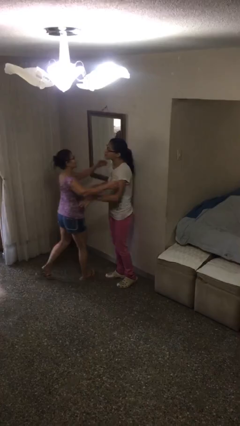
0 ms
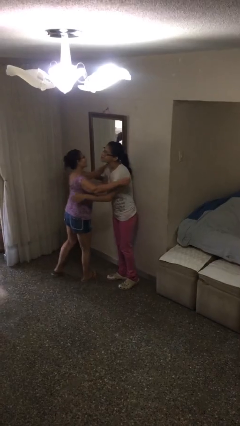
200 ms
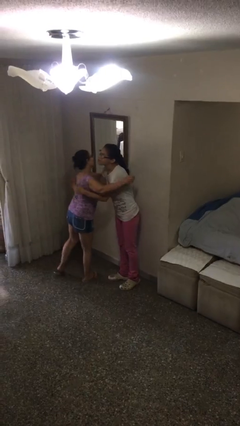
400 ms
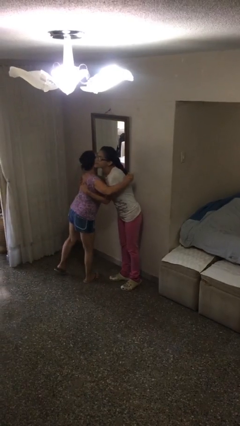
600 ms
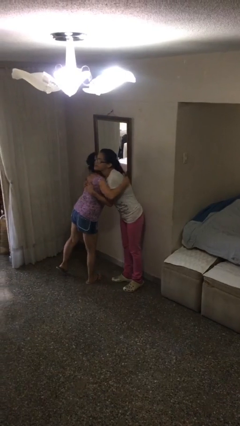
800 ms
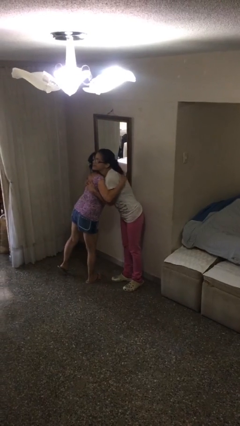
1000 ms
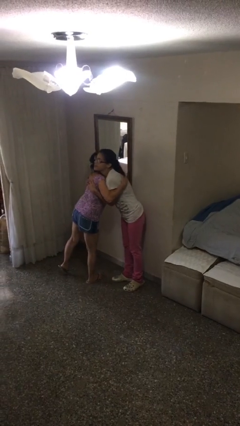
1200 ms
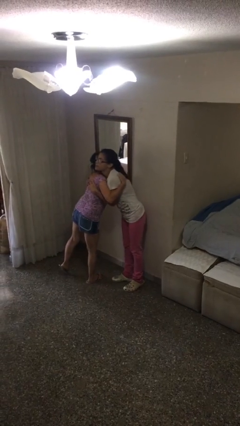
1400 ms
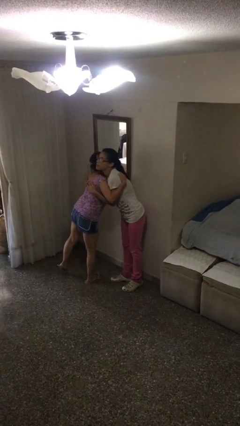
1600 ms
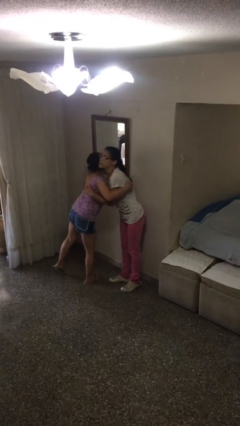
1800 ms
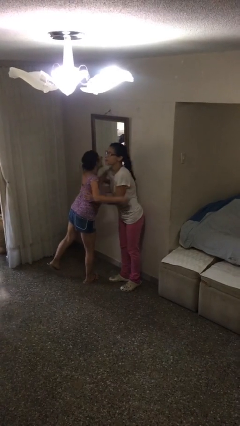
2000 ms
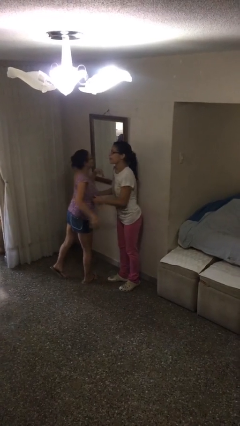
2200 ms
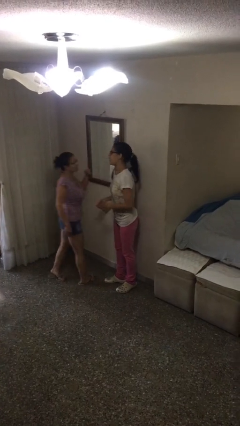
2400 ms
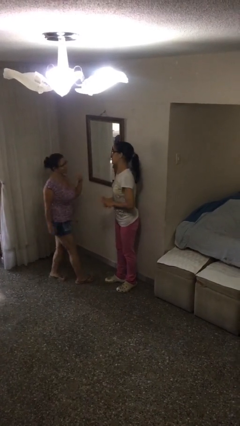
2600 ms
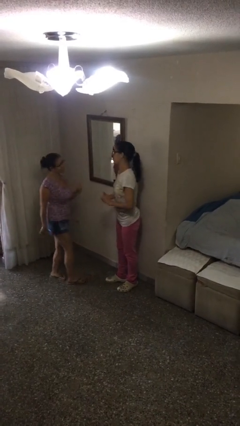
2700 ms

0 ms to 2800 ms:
person embraces person

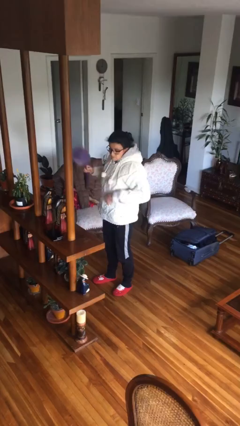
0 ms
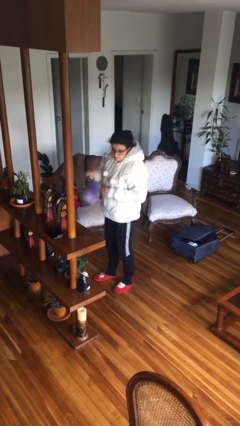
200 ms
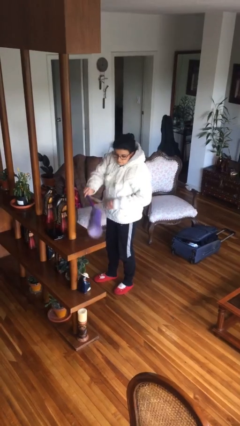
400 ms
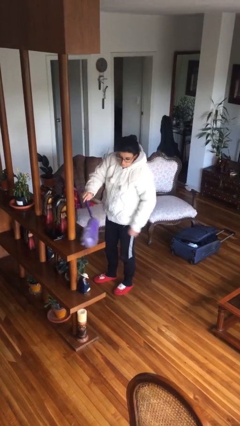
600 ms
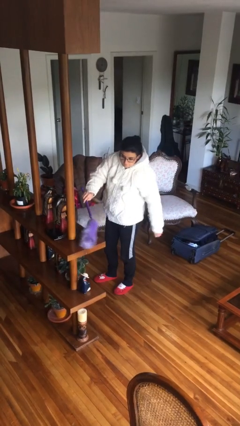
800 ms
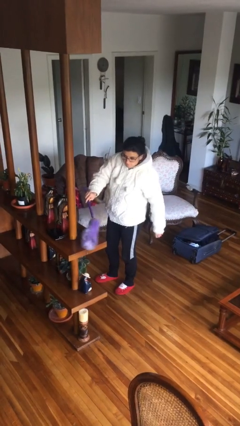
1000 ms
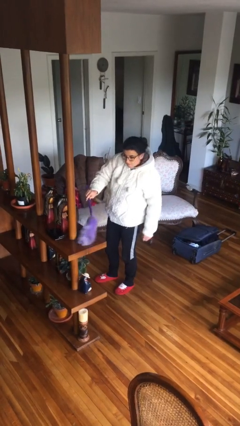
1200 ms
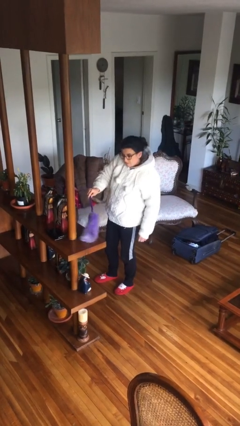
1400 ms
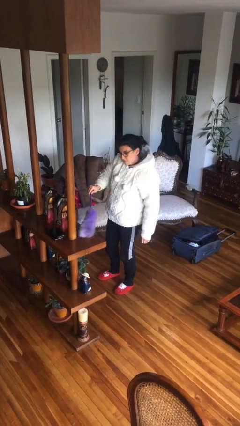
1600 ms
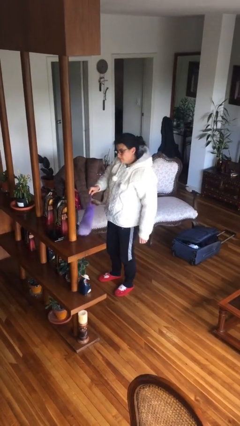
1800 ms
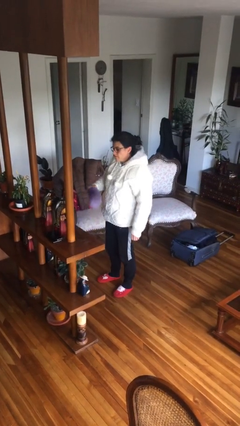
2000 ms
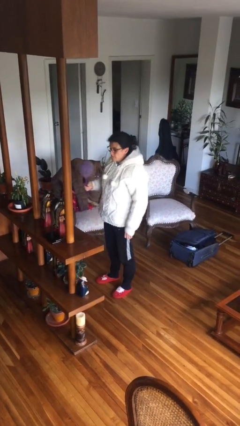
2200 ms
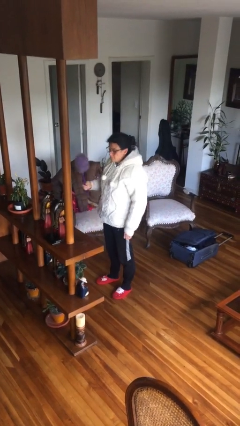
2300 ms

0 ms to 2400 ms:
person dusts furniture

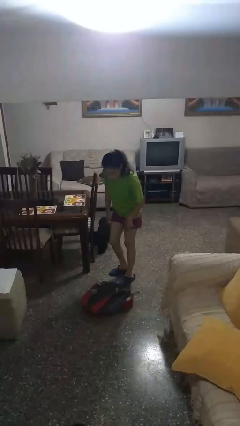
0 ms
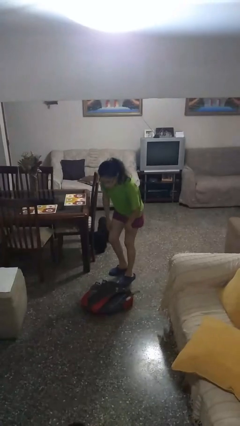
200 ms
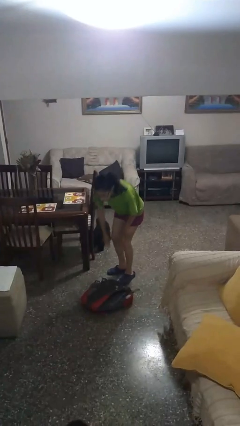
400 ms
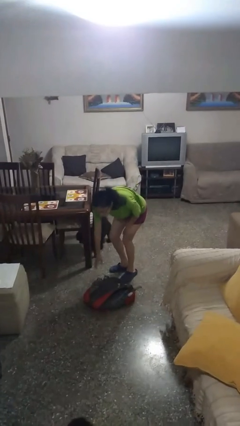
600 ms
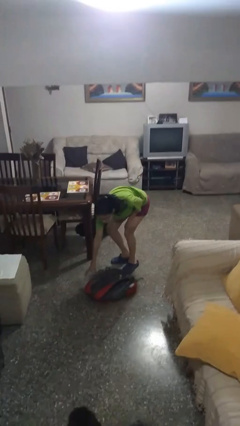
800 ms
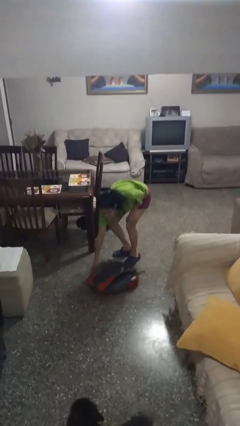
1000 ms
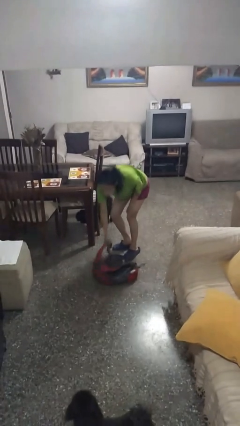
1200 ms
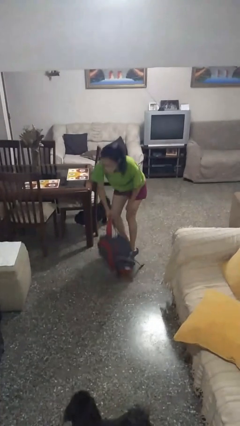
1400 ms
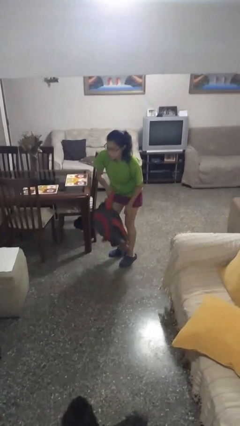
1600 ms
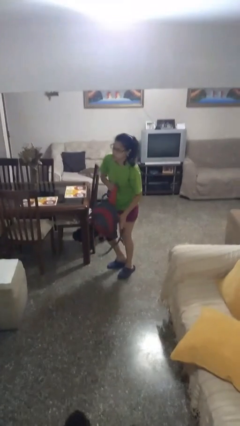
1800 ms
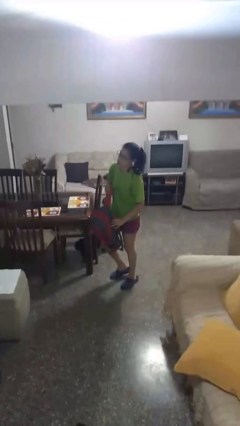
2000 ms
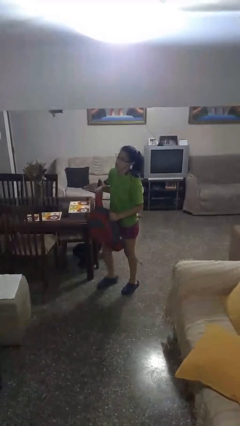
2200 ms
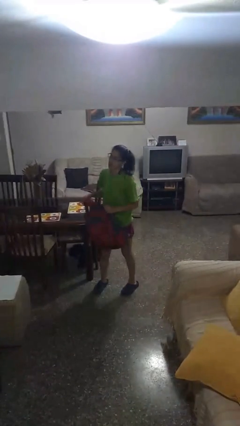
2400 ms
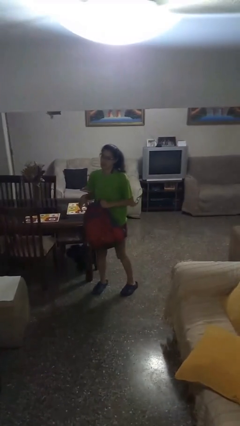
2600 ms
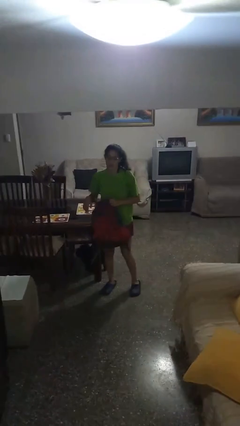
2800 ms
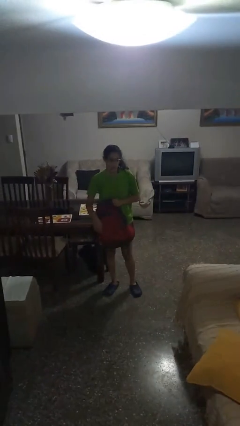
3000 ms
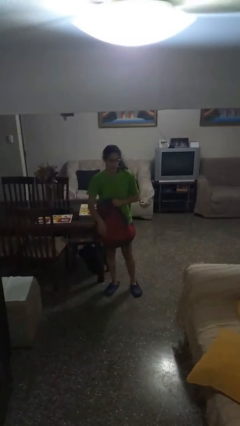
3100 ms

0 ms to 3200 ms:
person picks up object from floor

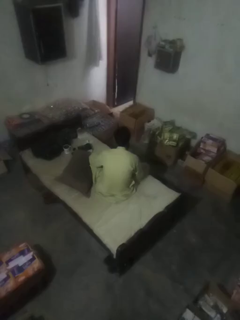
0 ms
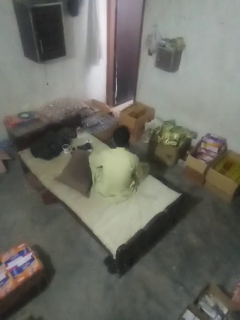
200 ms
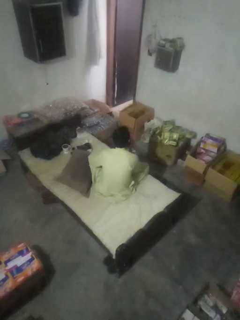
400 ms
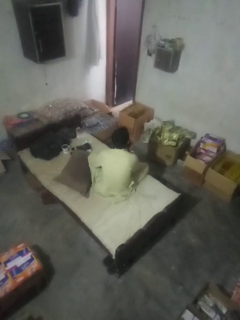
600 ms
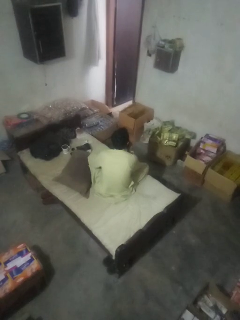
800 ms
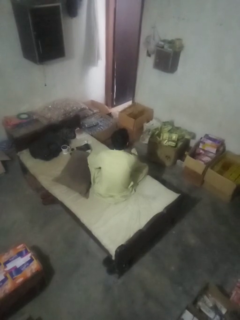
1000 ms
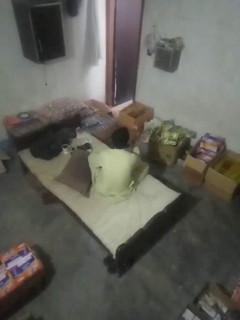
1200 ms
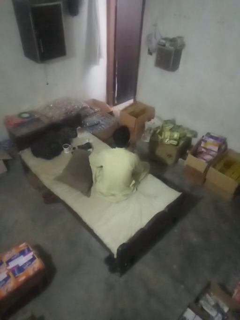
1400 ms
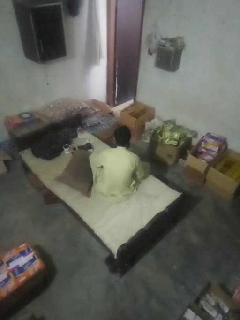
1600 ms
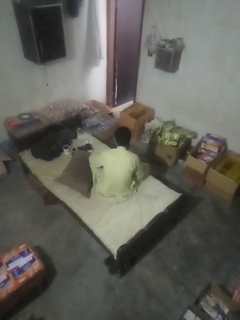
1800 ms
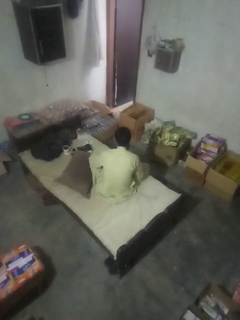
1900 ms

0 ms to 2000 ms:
person gestures blow kiss

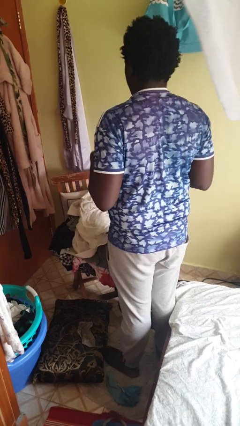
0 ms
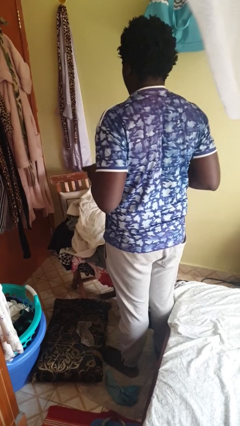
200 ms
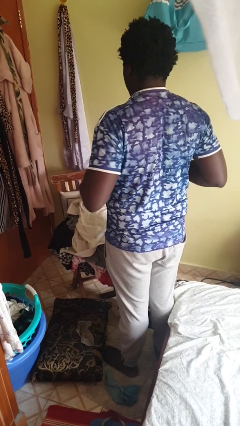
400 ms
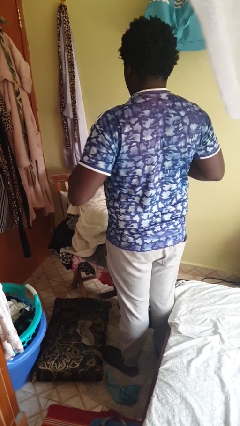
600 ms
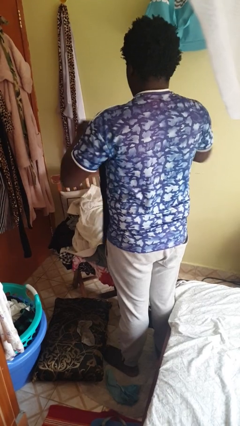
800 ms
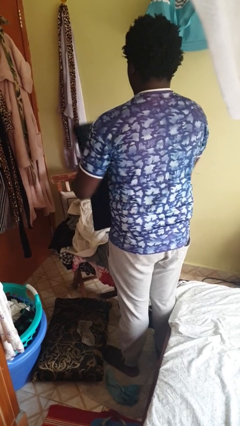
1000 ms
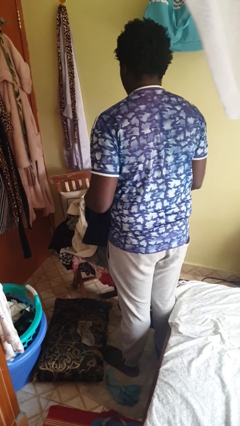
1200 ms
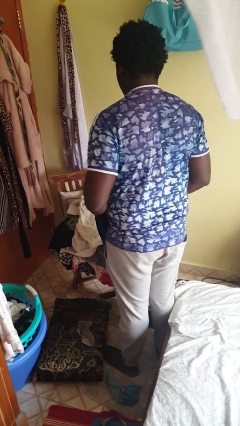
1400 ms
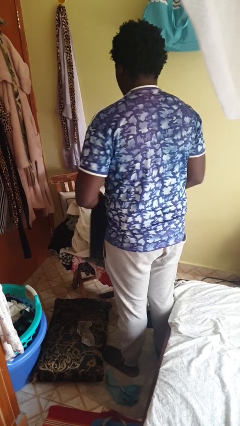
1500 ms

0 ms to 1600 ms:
person folds pants

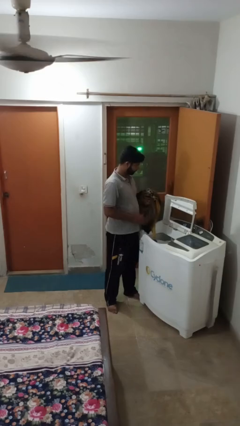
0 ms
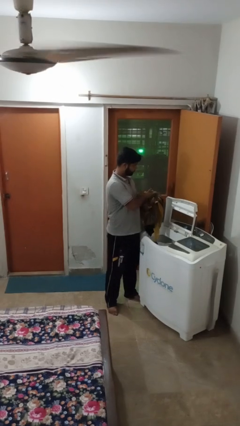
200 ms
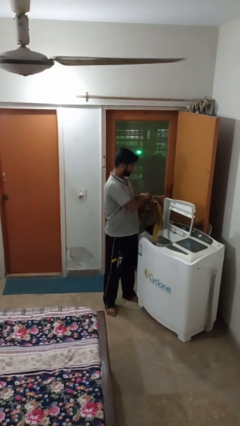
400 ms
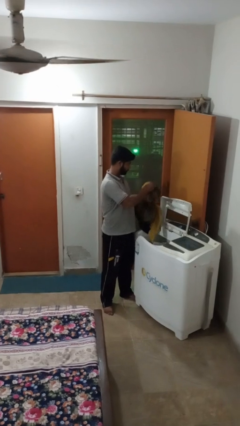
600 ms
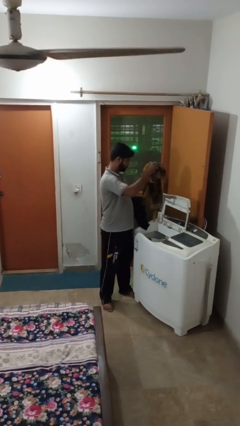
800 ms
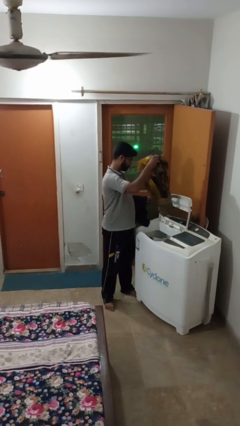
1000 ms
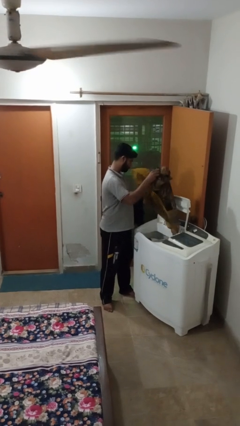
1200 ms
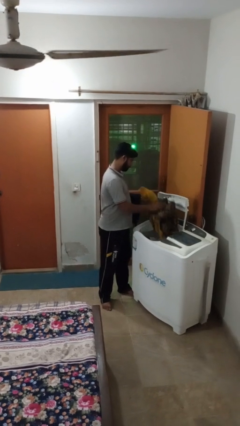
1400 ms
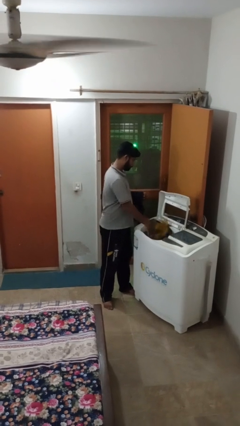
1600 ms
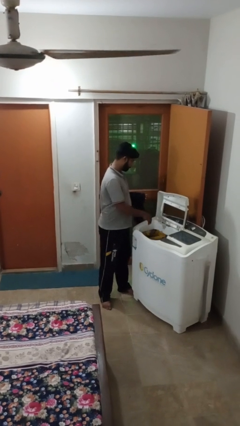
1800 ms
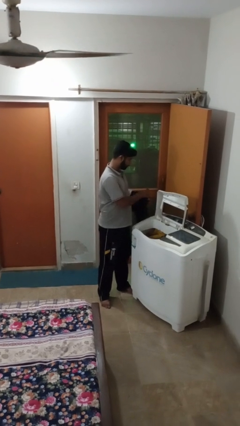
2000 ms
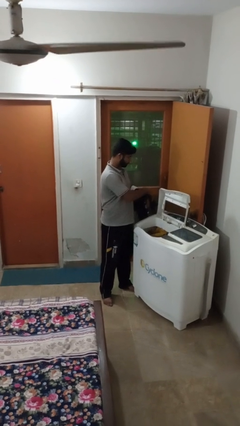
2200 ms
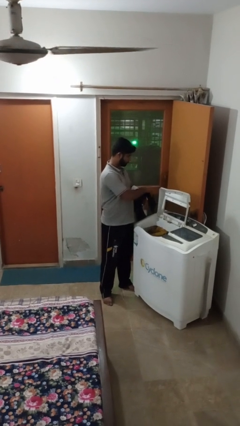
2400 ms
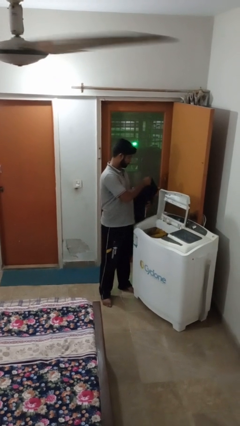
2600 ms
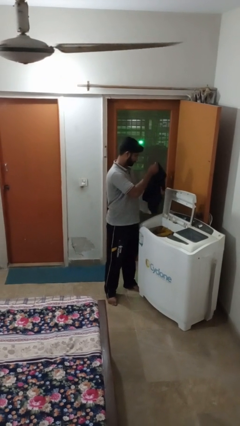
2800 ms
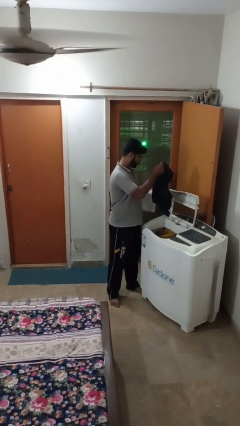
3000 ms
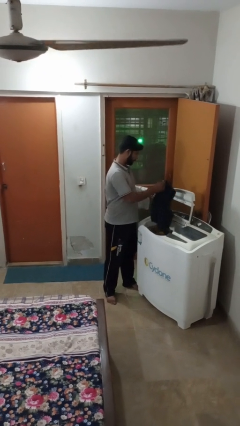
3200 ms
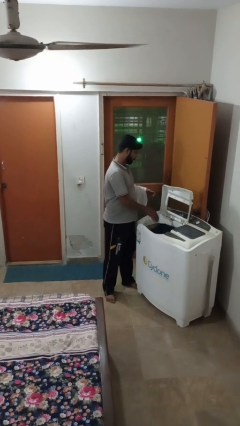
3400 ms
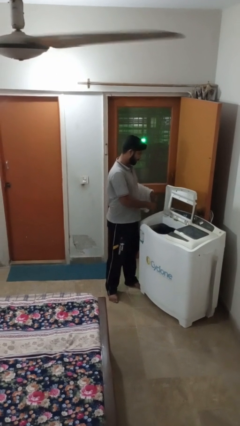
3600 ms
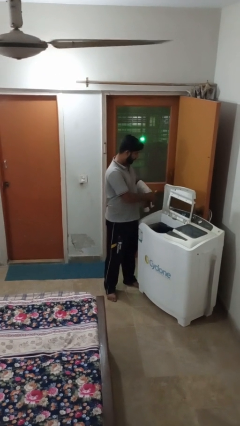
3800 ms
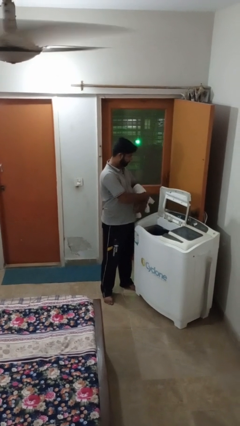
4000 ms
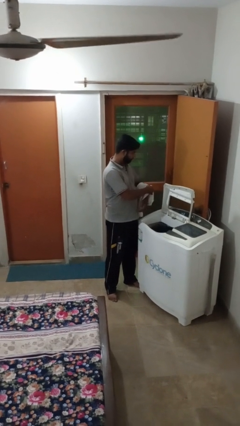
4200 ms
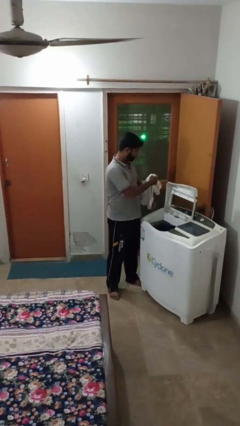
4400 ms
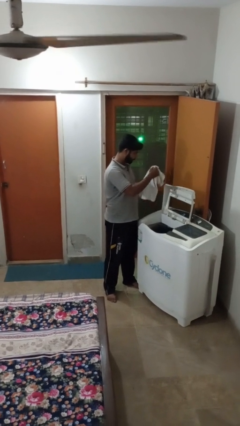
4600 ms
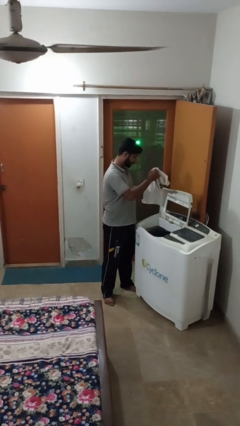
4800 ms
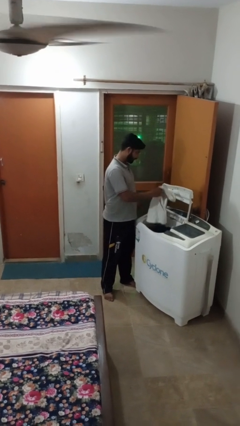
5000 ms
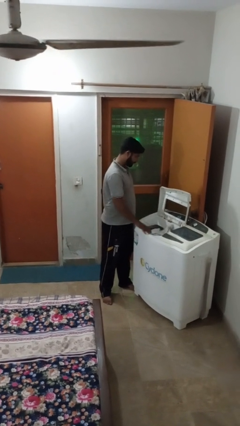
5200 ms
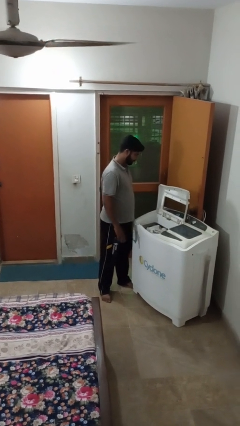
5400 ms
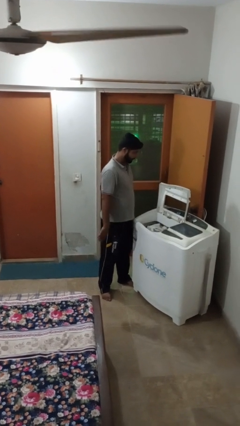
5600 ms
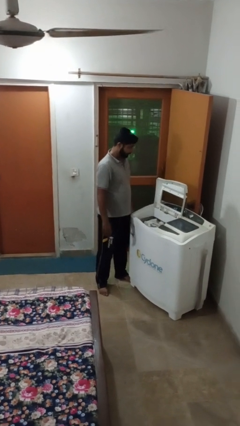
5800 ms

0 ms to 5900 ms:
person loads clotheswasher
